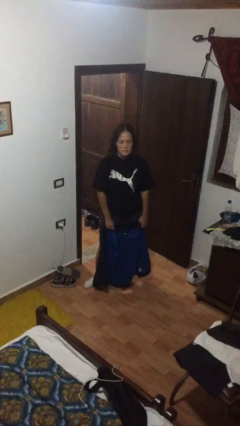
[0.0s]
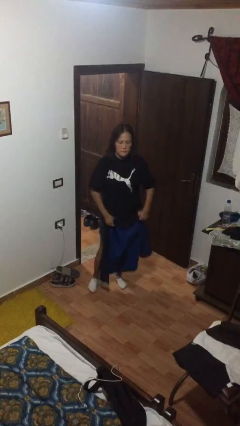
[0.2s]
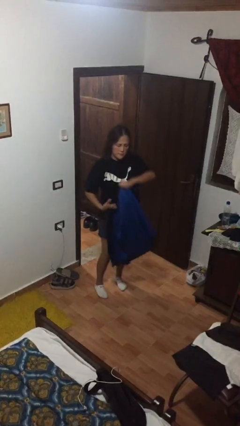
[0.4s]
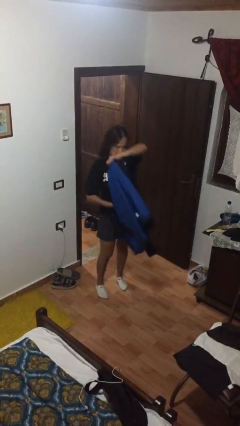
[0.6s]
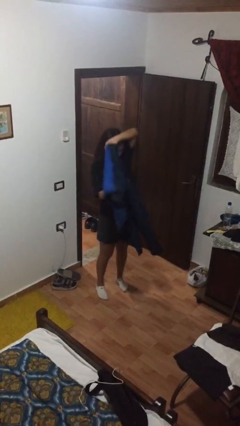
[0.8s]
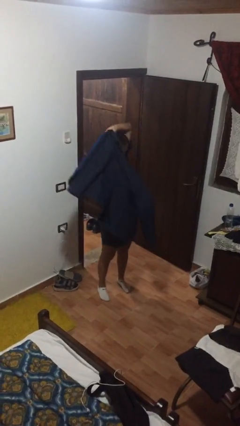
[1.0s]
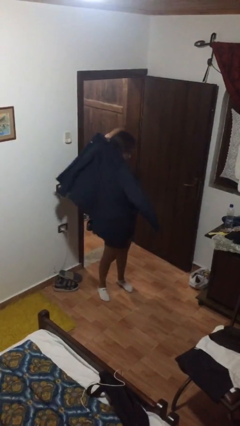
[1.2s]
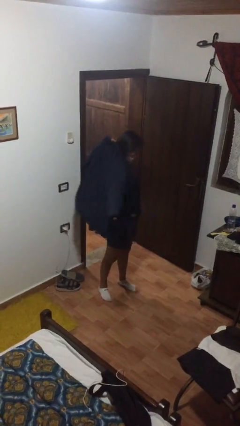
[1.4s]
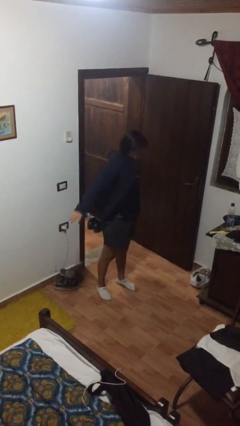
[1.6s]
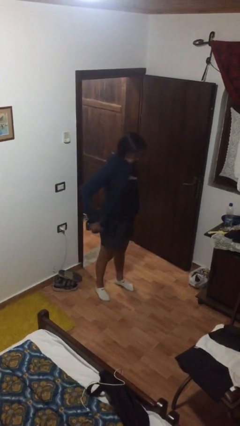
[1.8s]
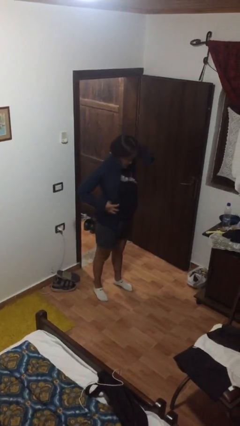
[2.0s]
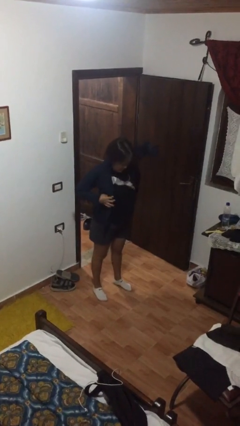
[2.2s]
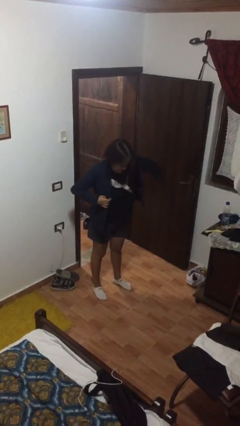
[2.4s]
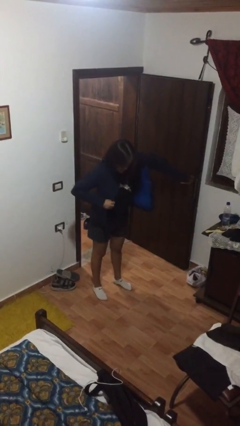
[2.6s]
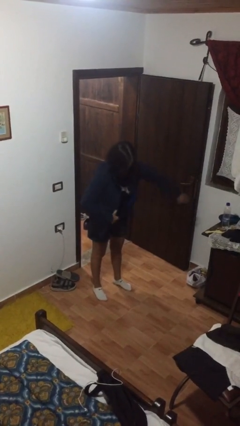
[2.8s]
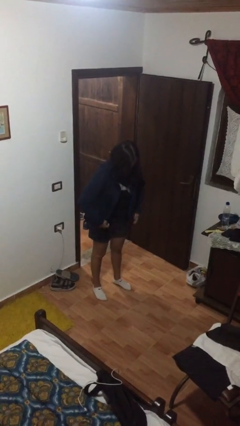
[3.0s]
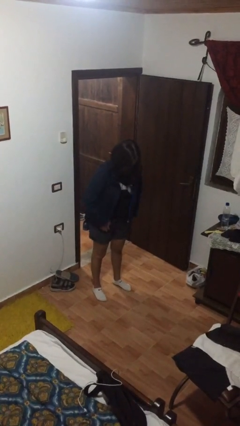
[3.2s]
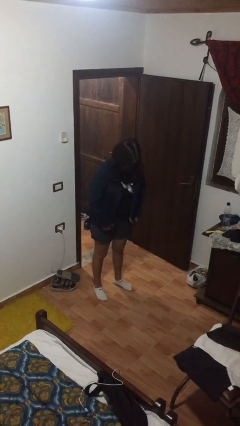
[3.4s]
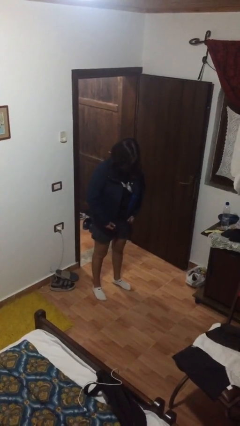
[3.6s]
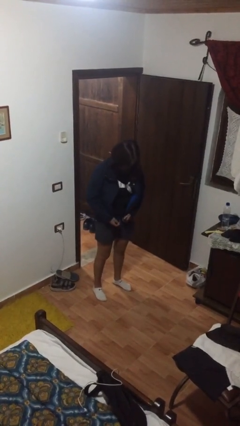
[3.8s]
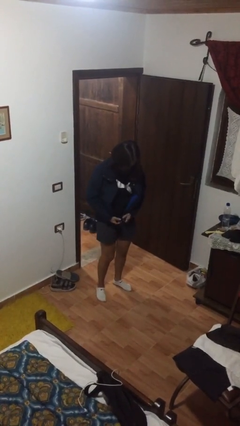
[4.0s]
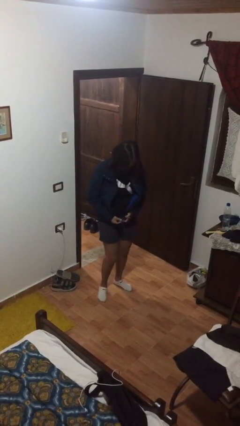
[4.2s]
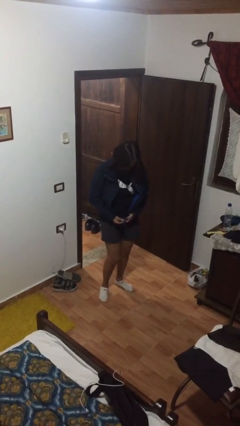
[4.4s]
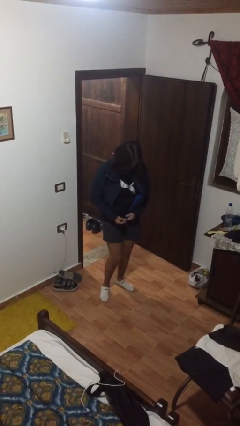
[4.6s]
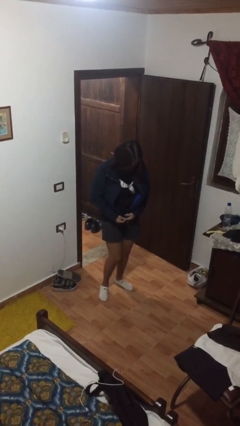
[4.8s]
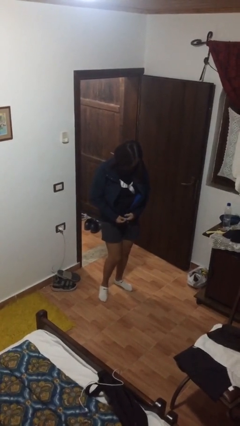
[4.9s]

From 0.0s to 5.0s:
person puts on jacket

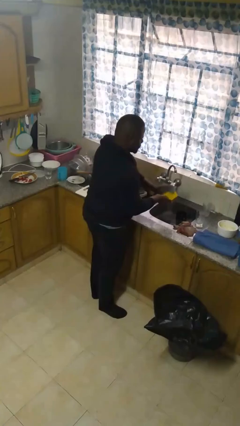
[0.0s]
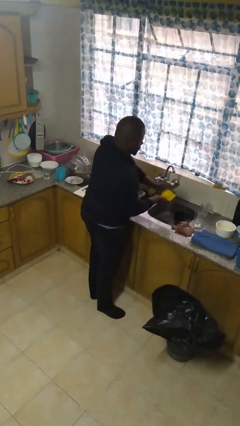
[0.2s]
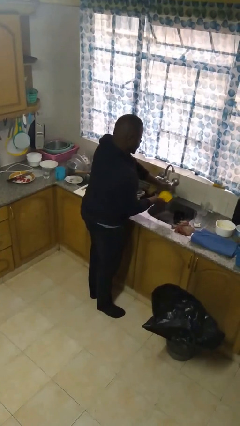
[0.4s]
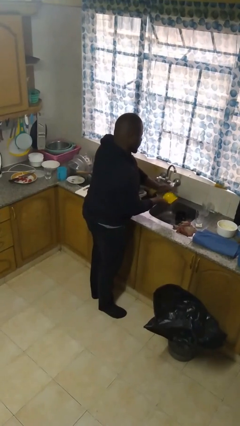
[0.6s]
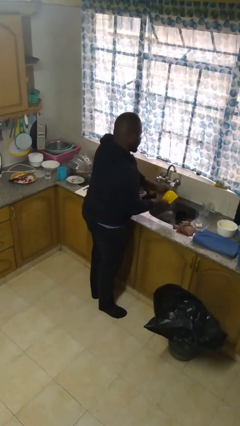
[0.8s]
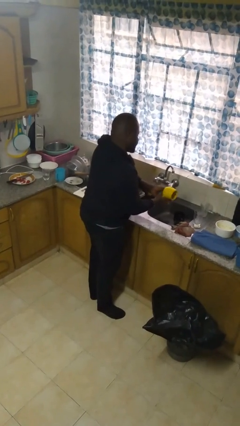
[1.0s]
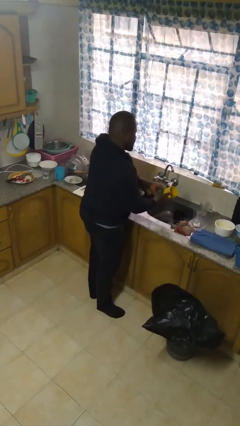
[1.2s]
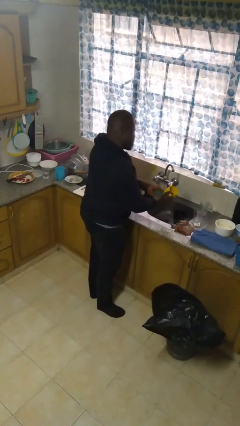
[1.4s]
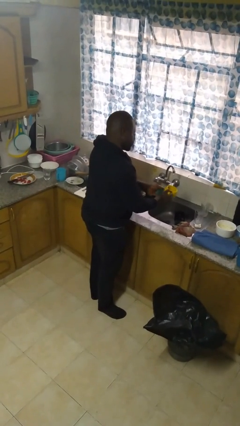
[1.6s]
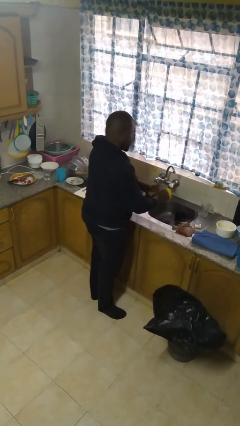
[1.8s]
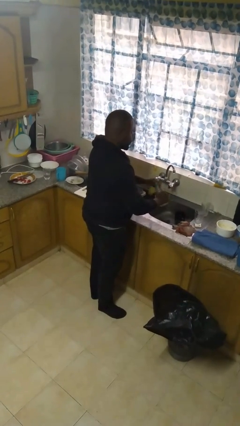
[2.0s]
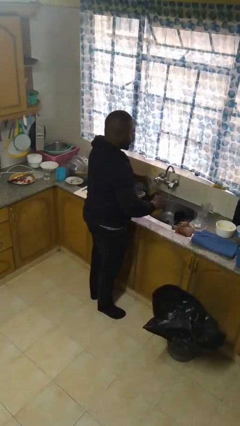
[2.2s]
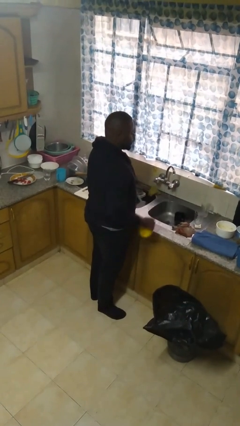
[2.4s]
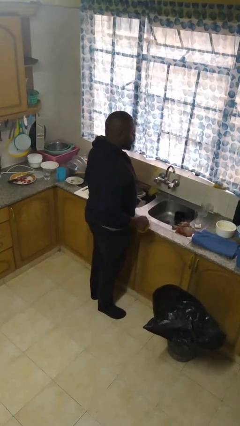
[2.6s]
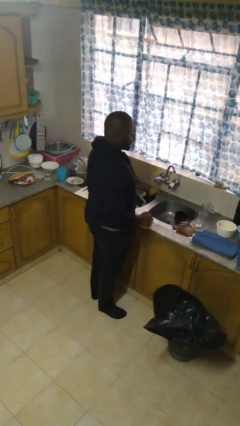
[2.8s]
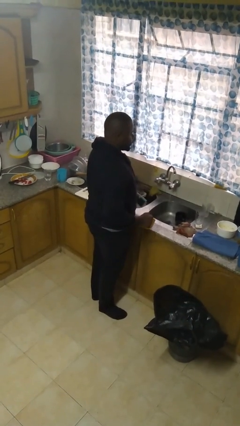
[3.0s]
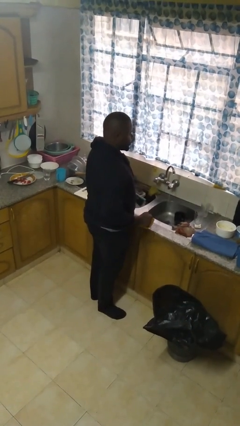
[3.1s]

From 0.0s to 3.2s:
person washes dish

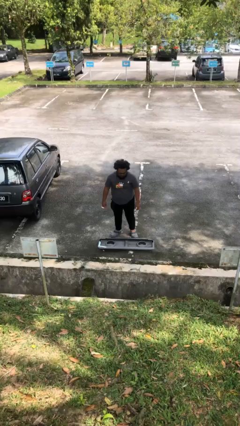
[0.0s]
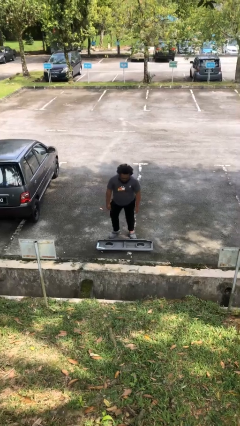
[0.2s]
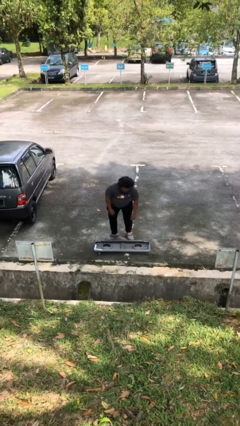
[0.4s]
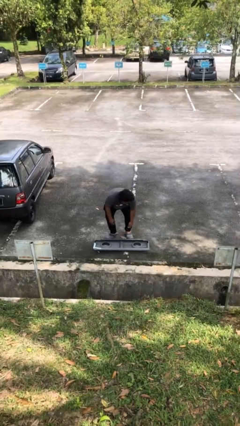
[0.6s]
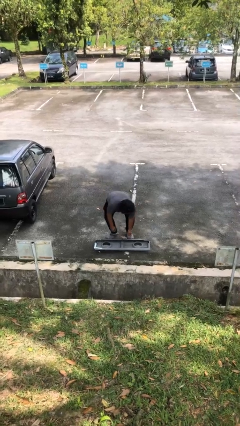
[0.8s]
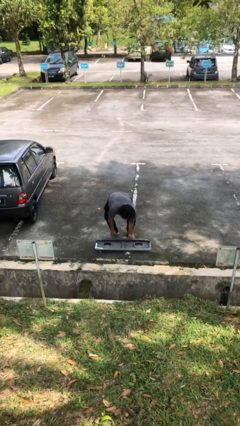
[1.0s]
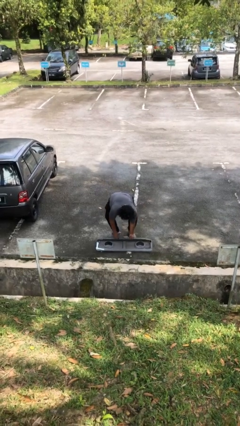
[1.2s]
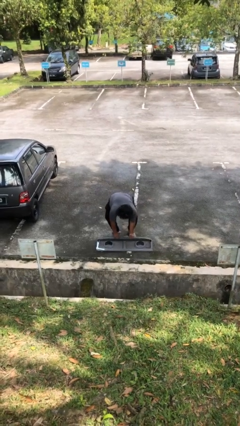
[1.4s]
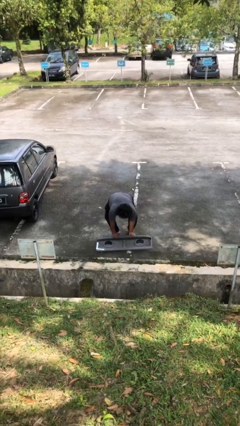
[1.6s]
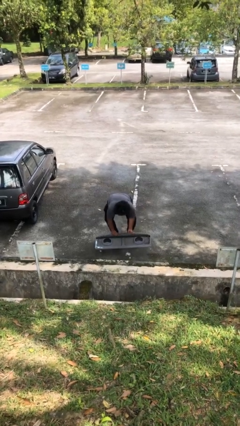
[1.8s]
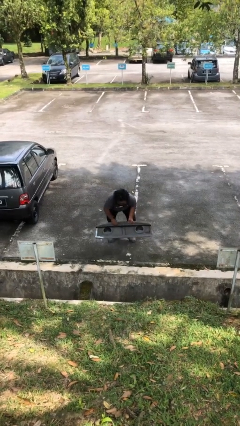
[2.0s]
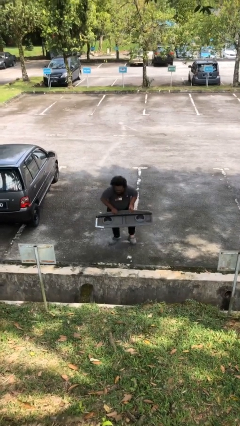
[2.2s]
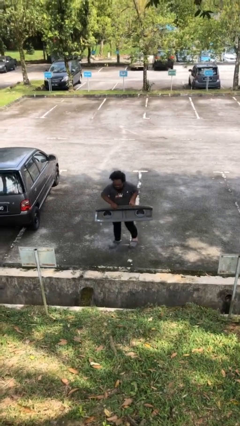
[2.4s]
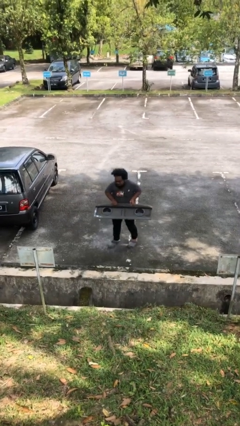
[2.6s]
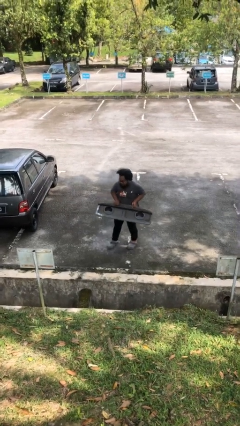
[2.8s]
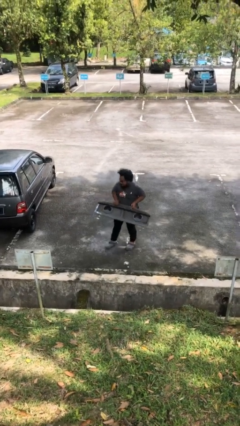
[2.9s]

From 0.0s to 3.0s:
person picks up object from floor

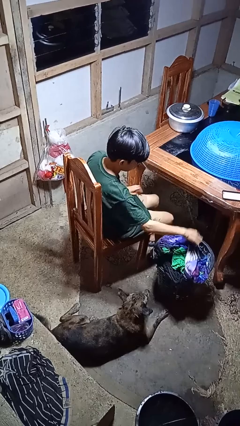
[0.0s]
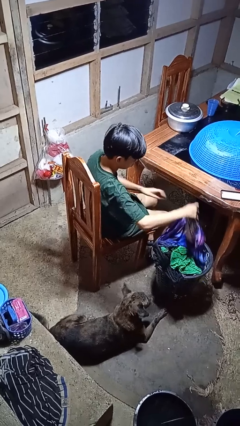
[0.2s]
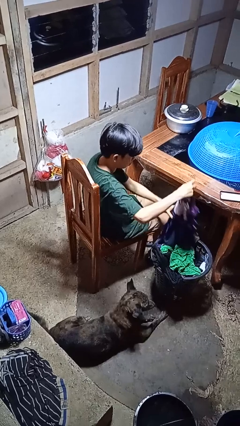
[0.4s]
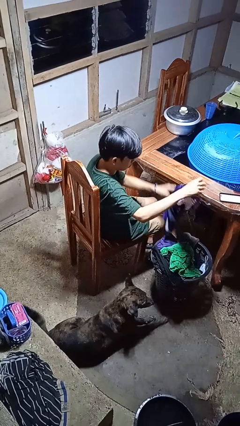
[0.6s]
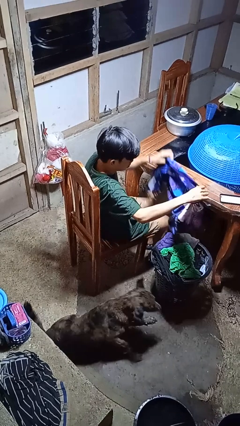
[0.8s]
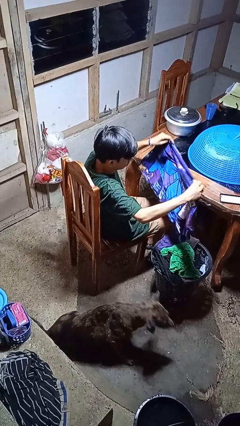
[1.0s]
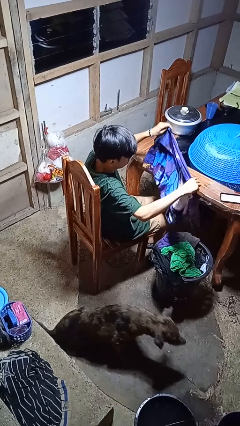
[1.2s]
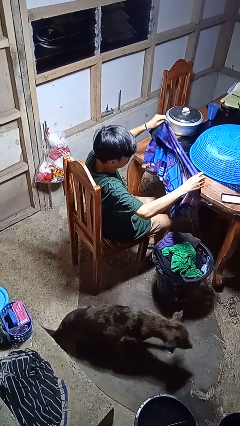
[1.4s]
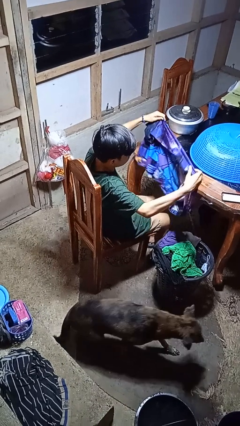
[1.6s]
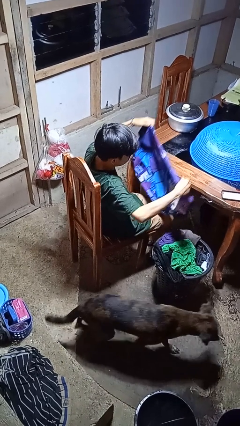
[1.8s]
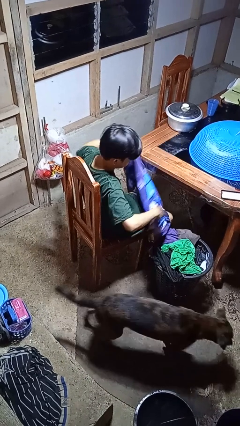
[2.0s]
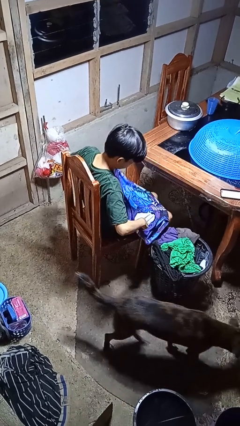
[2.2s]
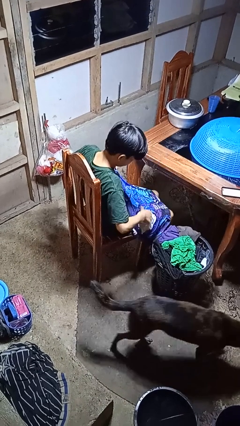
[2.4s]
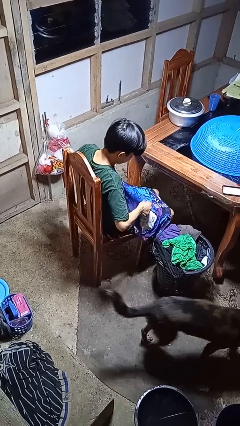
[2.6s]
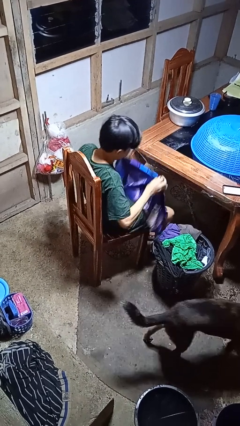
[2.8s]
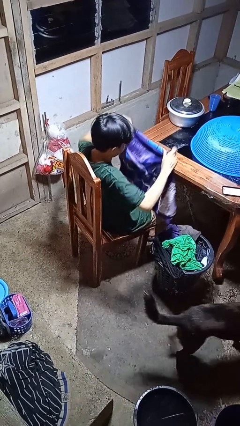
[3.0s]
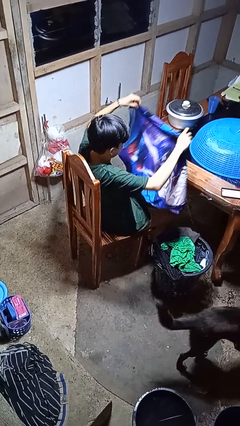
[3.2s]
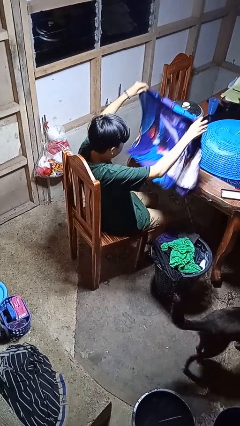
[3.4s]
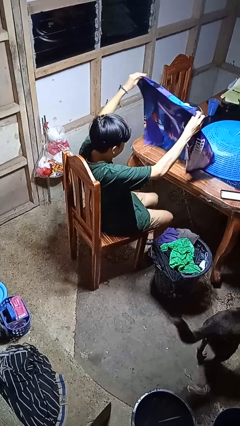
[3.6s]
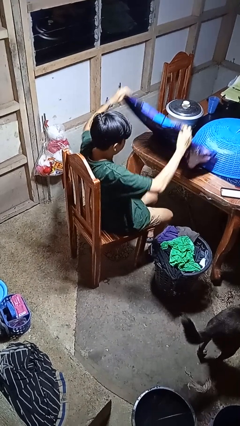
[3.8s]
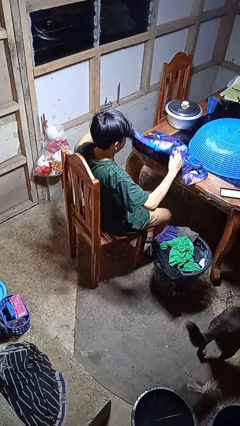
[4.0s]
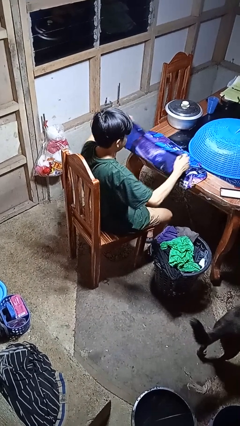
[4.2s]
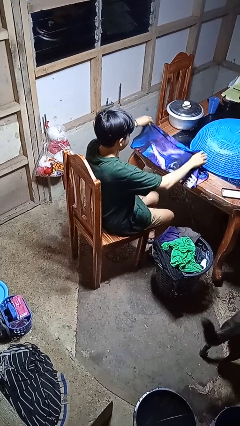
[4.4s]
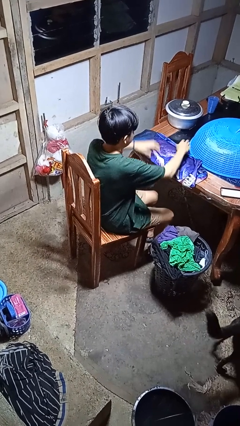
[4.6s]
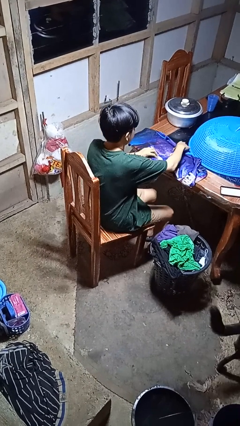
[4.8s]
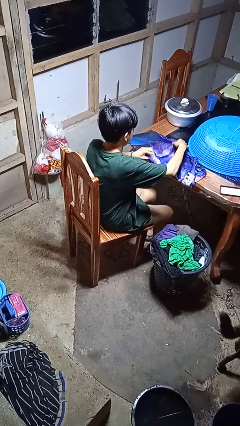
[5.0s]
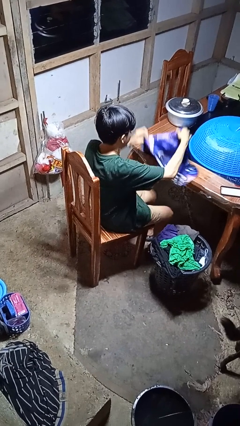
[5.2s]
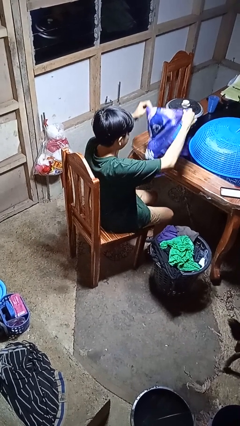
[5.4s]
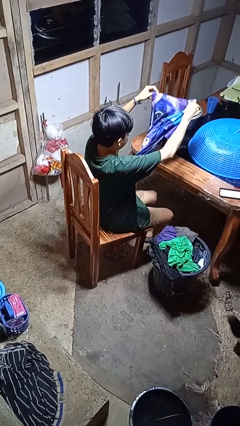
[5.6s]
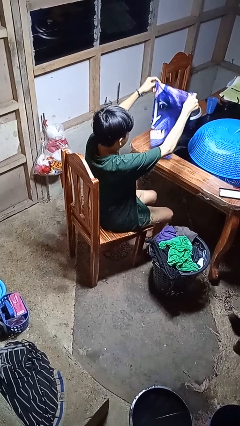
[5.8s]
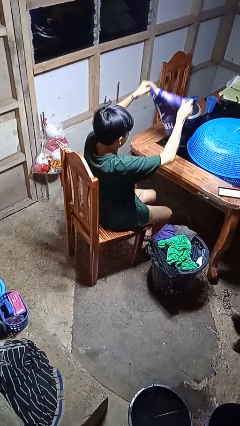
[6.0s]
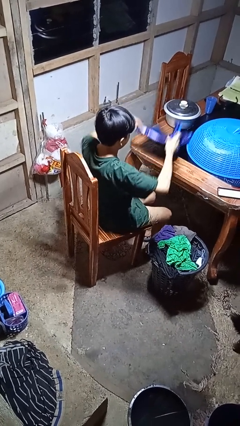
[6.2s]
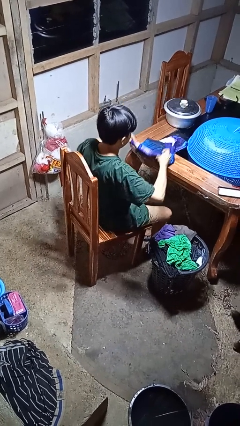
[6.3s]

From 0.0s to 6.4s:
person folds shirt

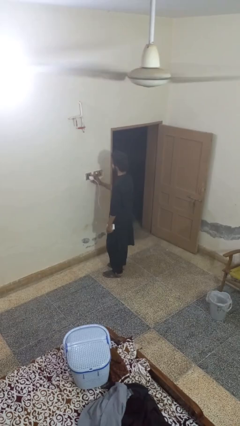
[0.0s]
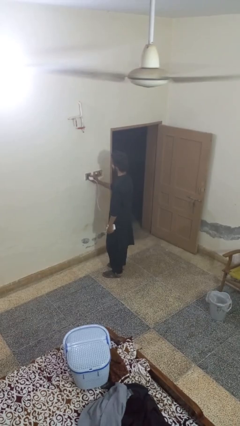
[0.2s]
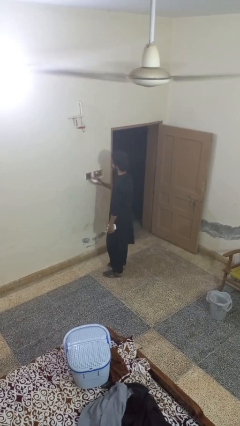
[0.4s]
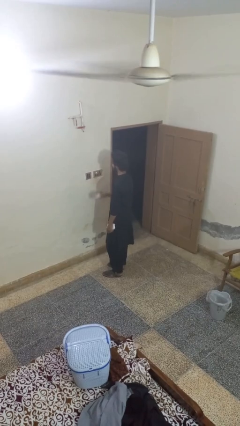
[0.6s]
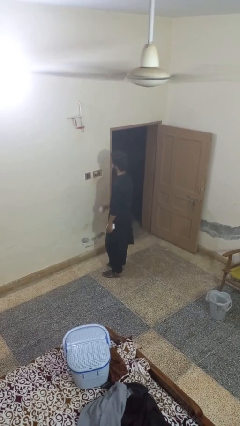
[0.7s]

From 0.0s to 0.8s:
person unplugs from electrical socket
